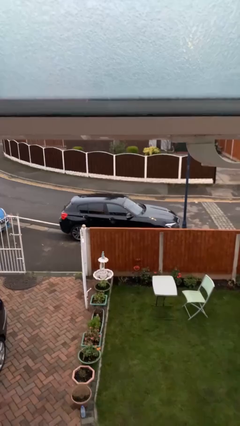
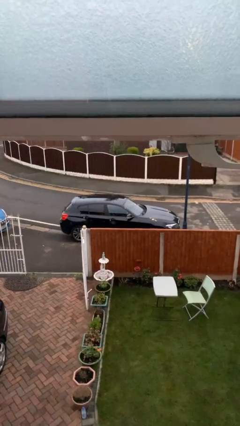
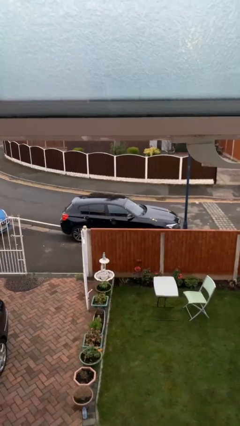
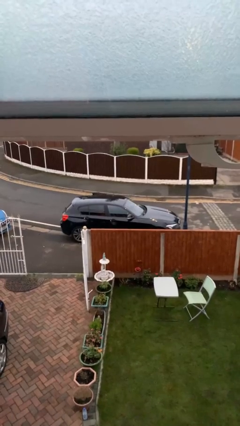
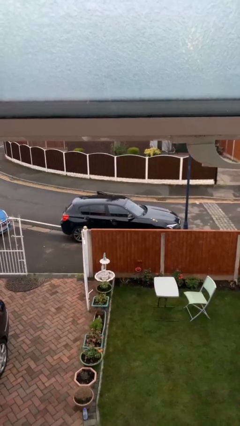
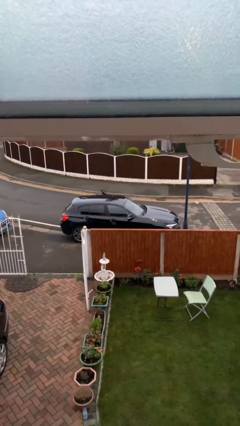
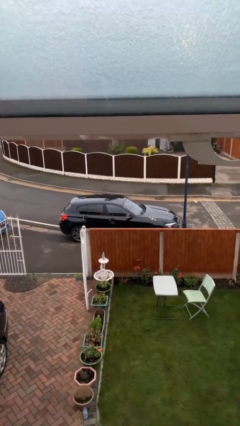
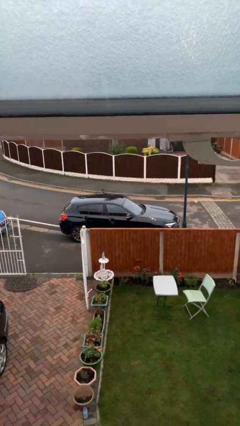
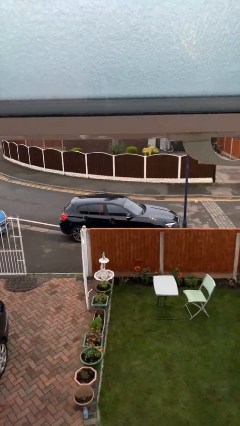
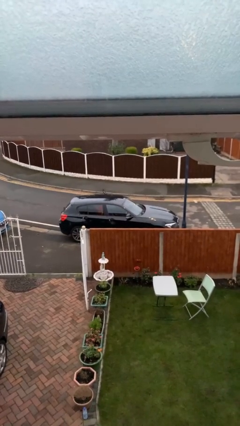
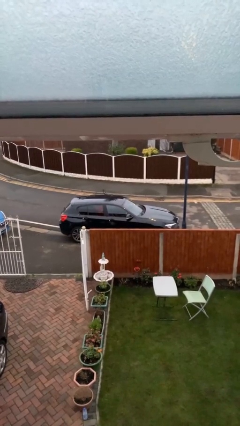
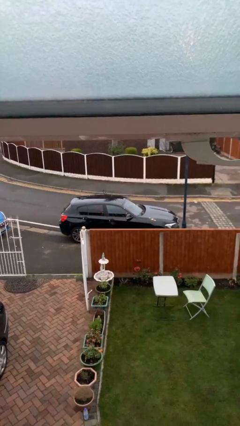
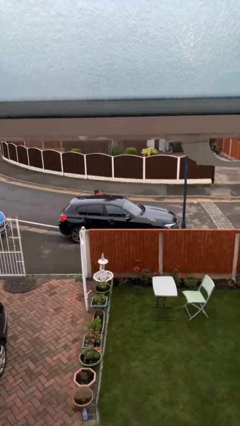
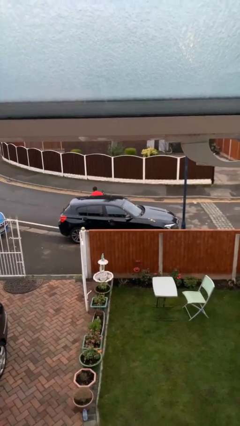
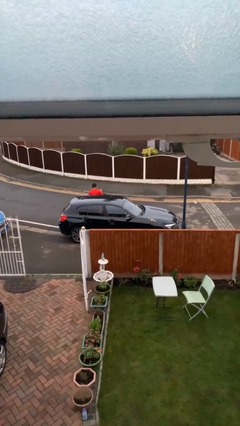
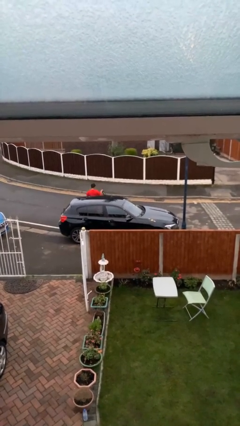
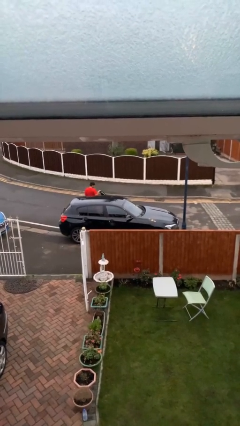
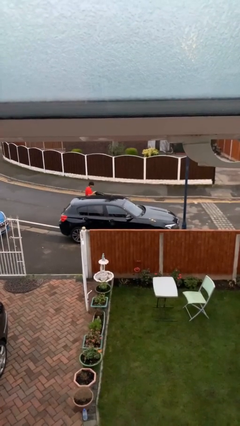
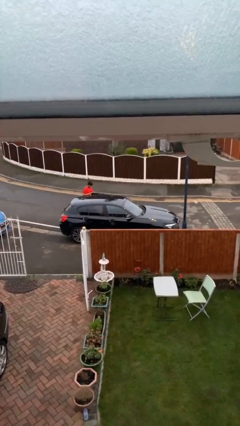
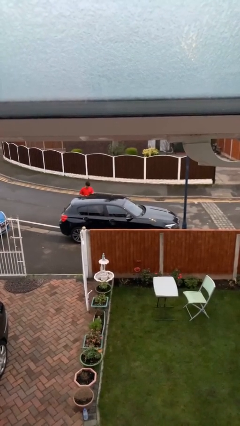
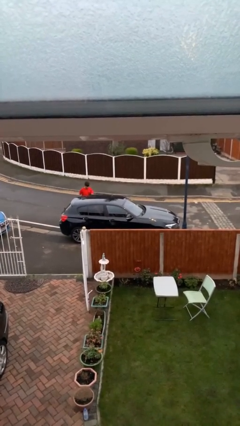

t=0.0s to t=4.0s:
car drops off person

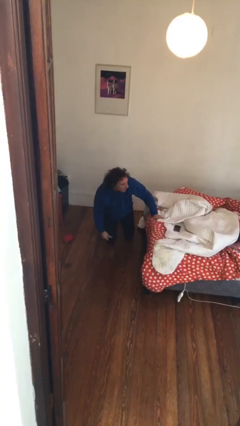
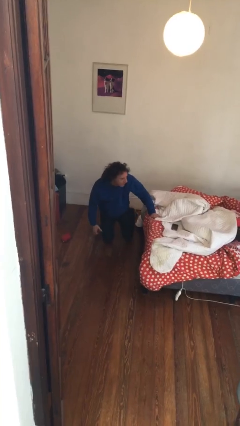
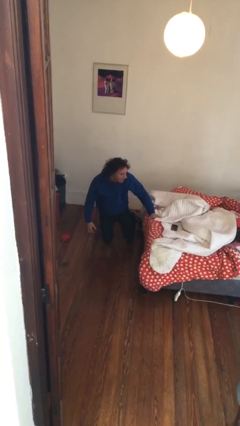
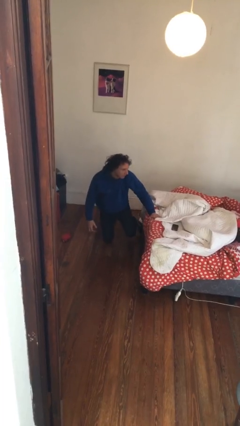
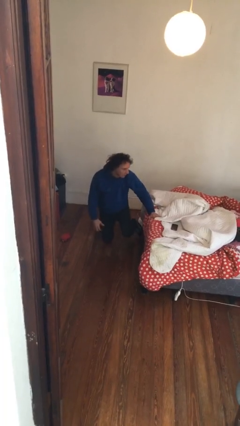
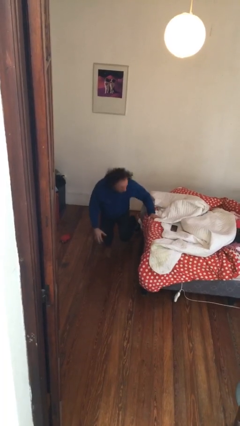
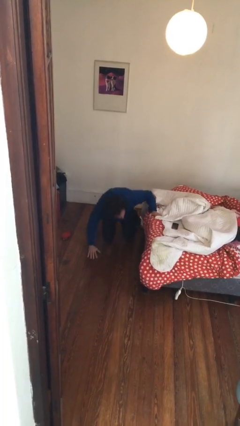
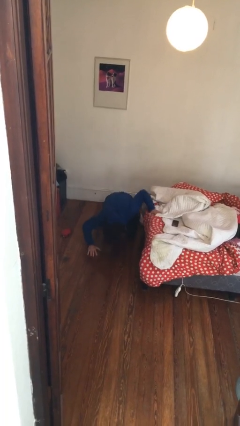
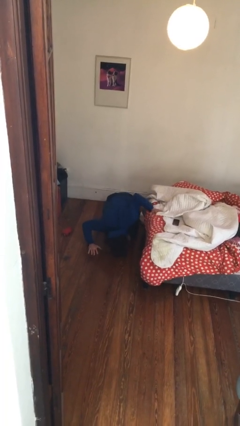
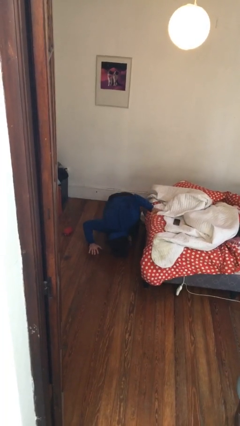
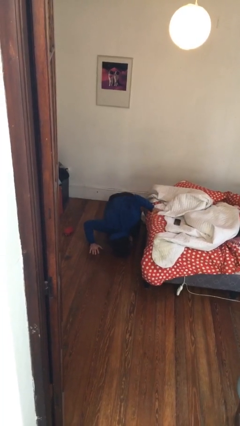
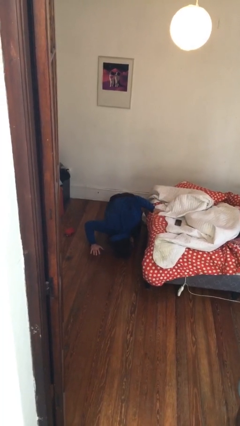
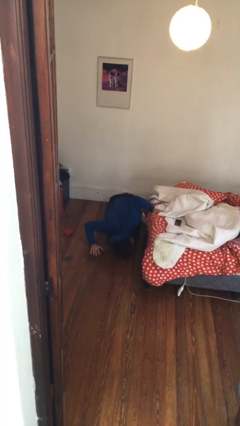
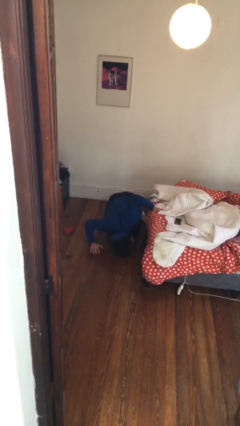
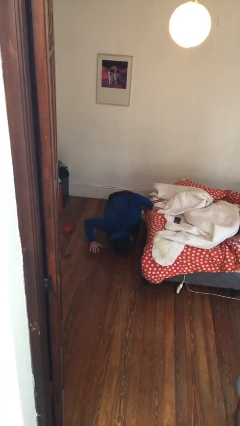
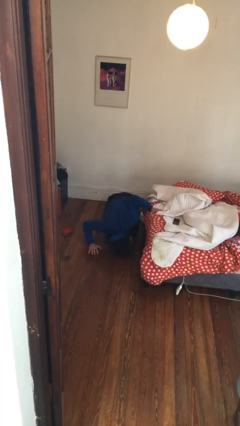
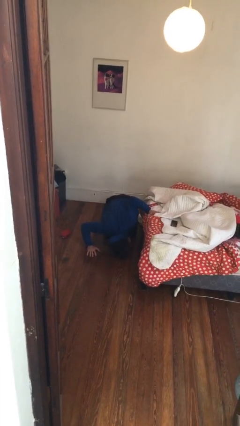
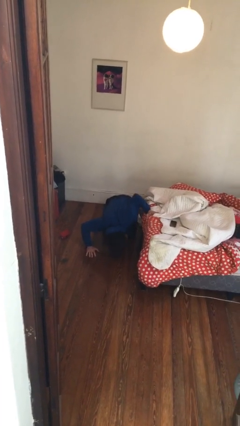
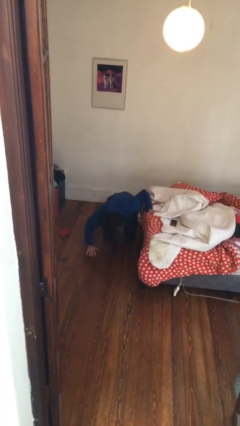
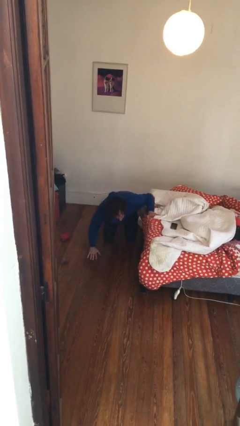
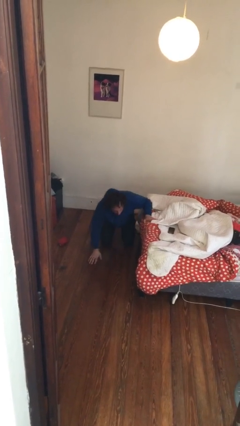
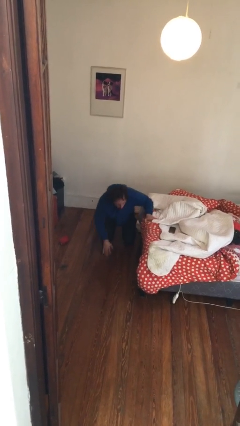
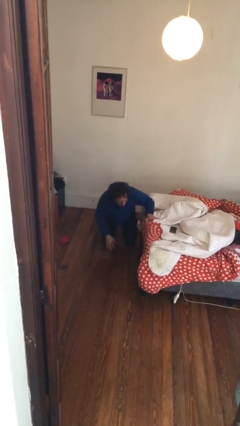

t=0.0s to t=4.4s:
person searches under bed

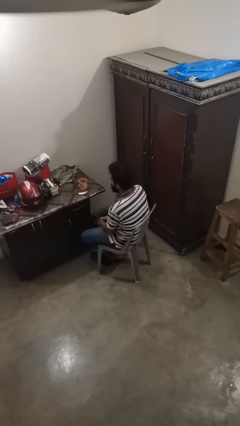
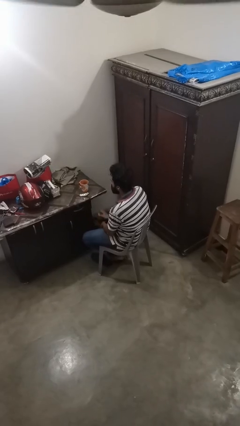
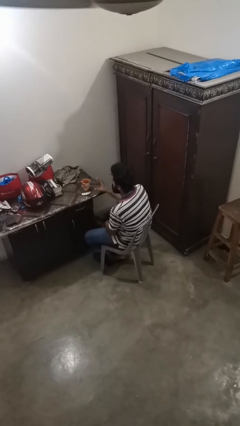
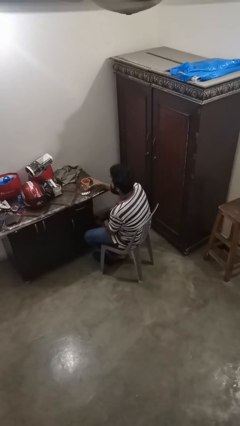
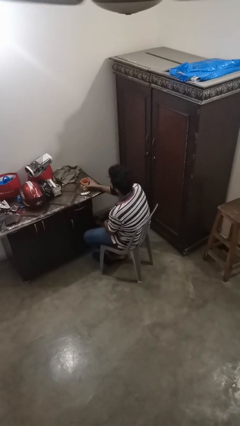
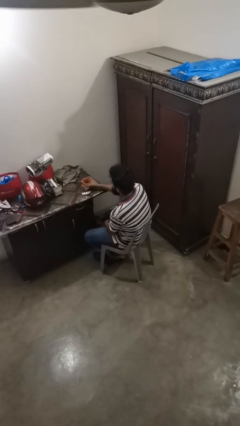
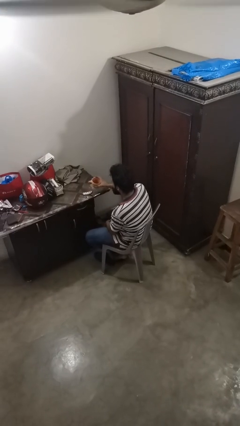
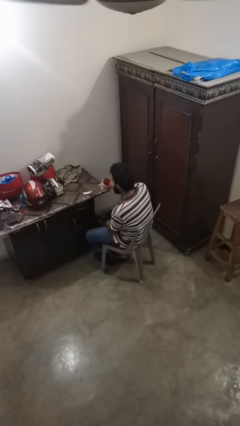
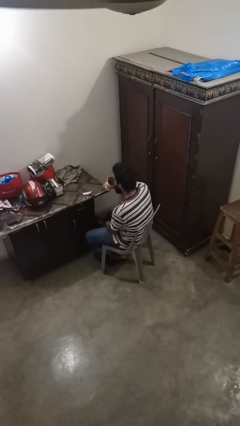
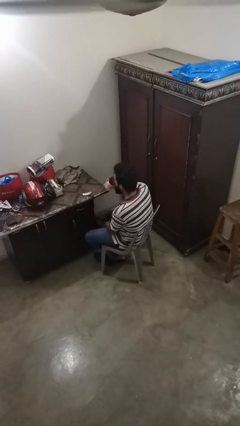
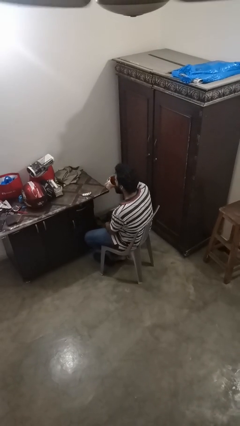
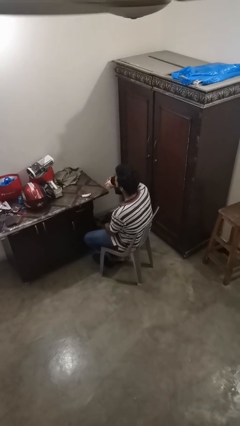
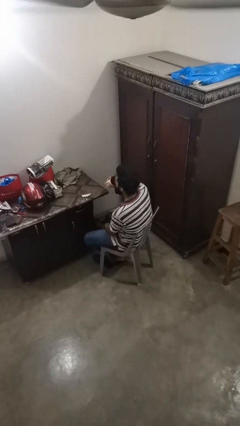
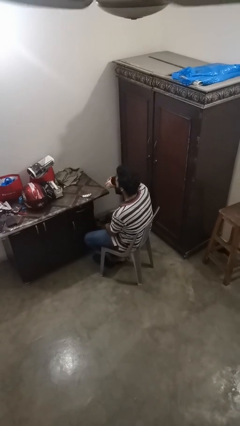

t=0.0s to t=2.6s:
person drinks from cup

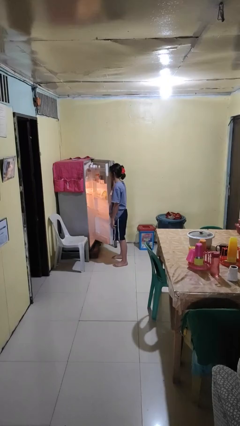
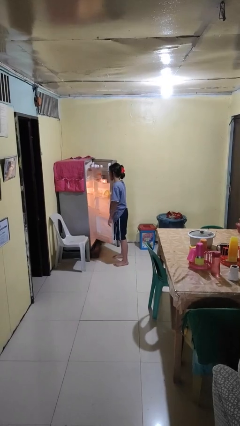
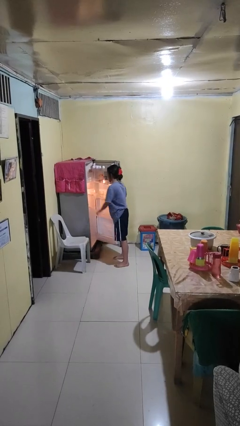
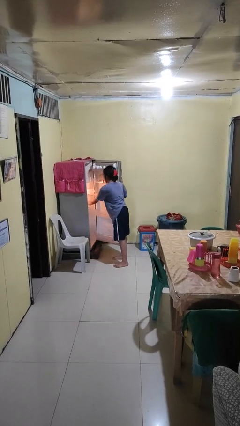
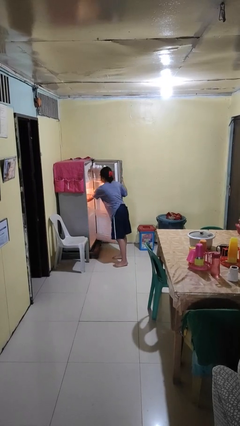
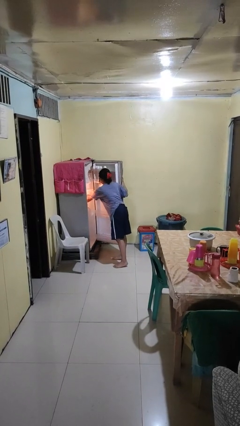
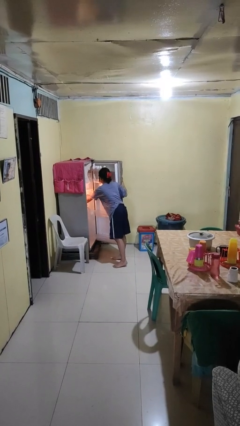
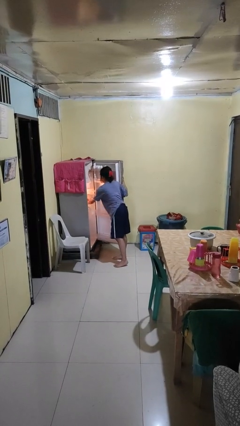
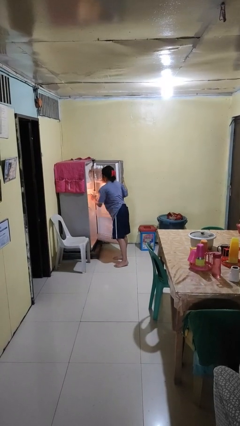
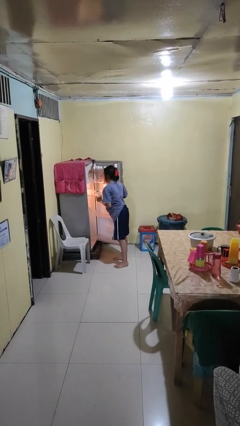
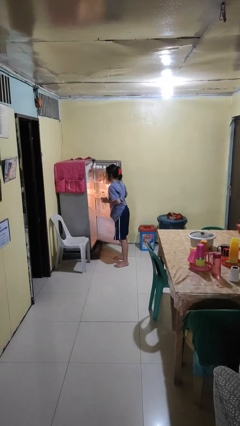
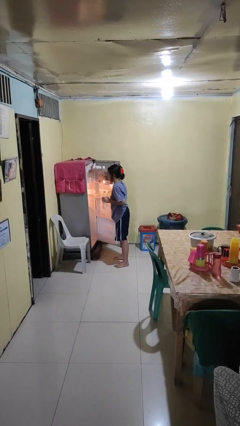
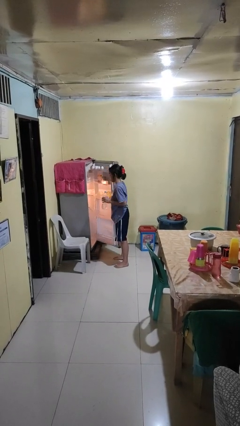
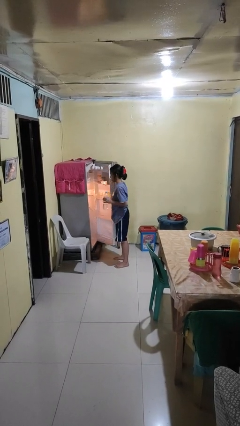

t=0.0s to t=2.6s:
person takes object from refrigerator

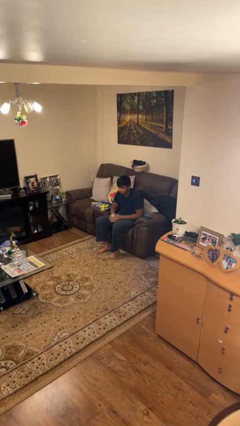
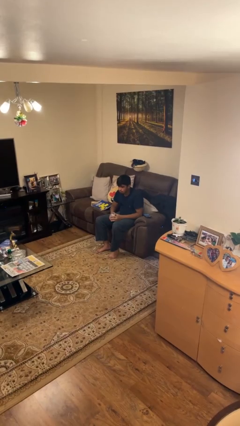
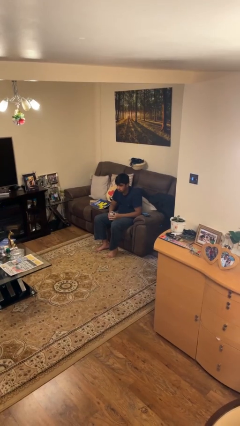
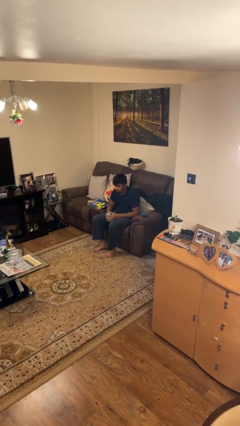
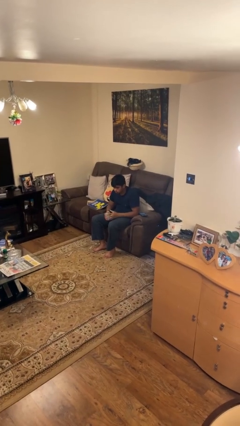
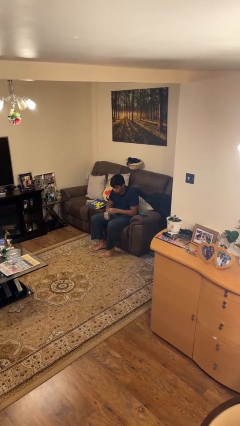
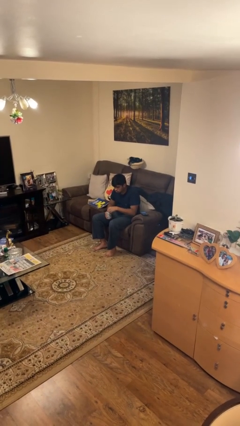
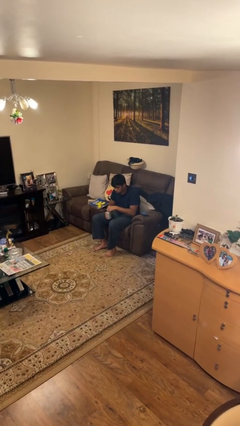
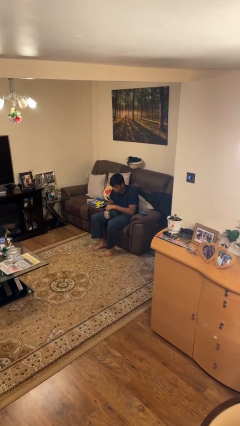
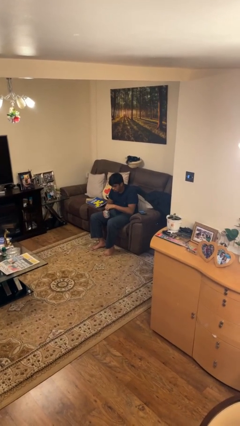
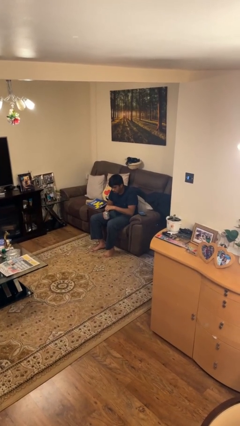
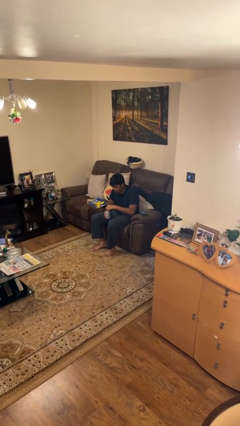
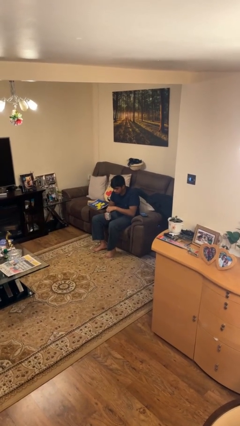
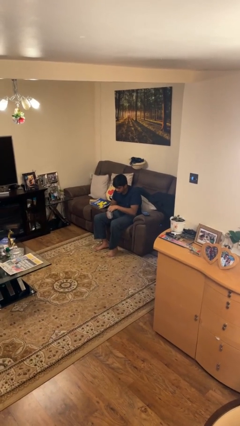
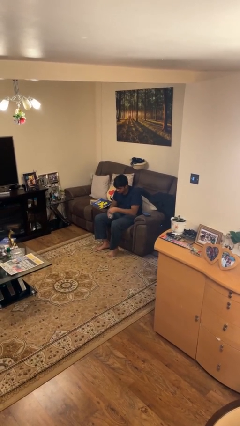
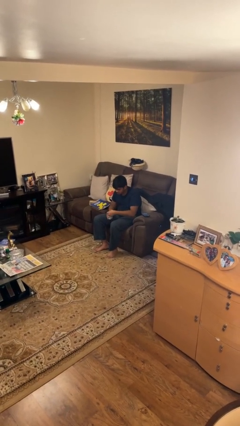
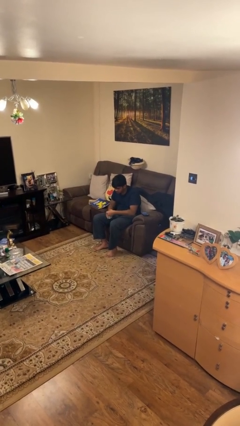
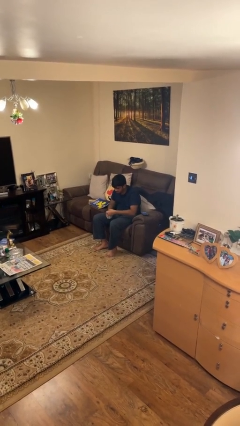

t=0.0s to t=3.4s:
person opens beverage can

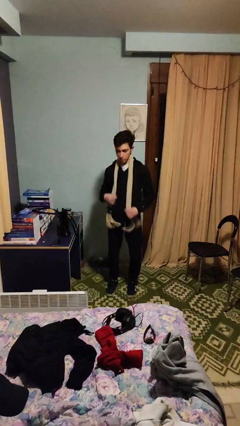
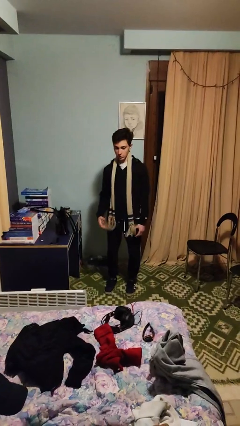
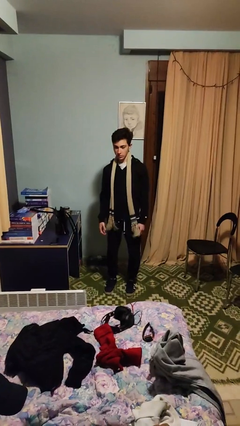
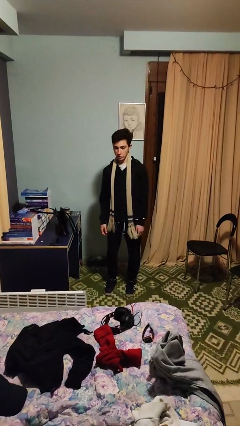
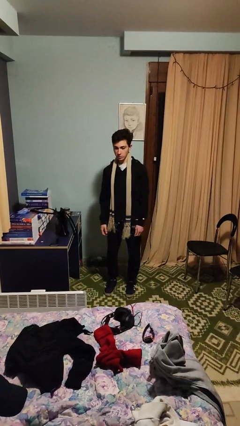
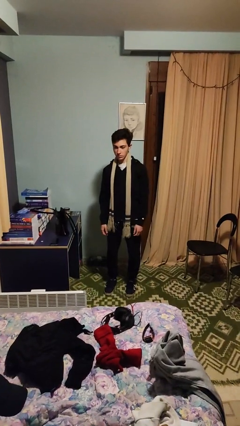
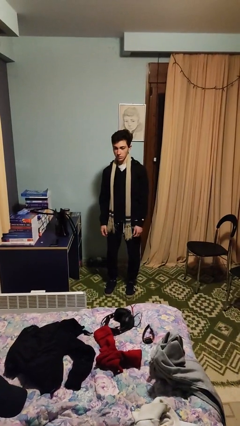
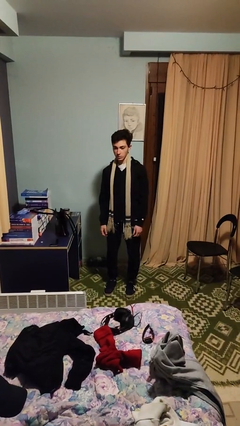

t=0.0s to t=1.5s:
person puts on scarf
